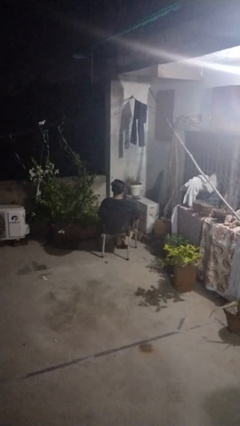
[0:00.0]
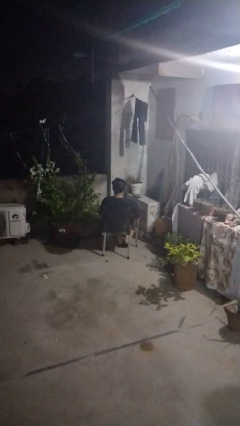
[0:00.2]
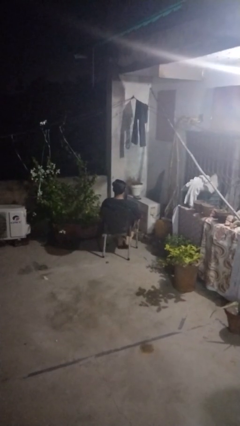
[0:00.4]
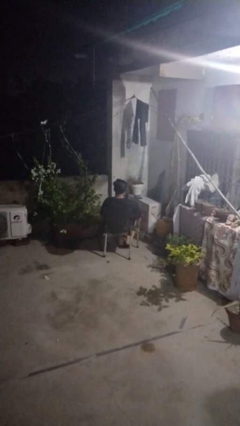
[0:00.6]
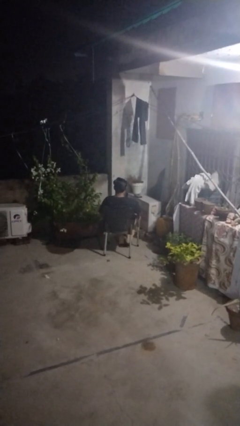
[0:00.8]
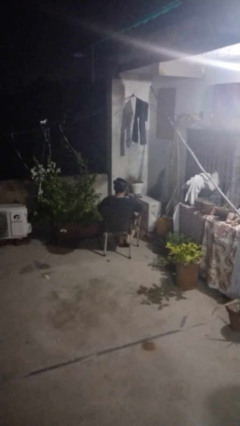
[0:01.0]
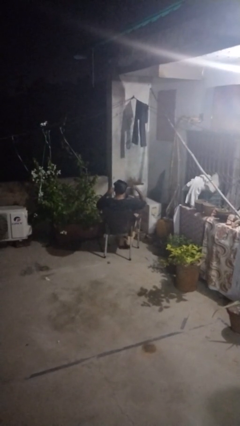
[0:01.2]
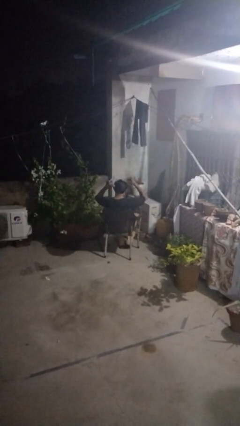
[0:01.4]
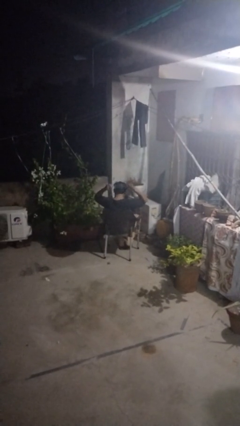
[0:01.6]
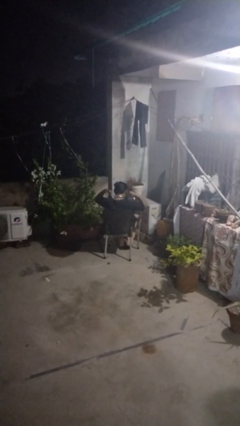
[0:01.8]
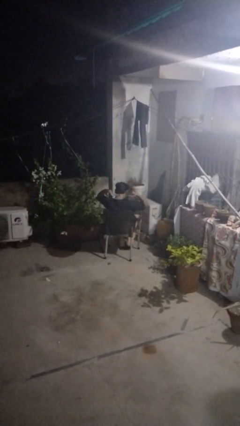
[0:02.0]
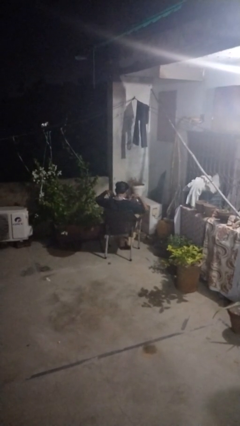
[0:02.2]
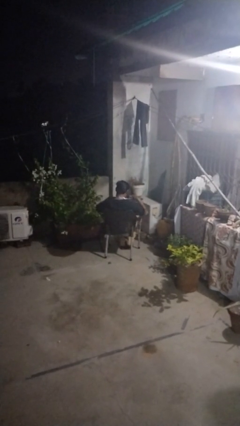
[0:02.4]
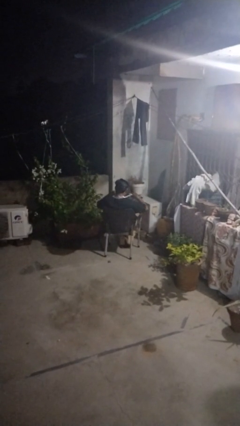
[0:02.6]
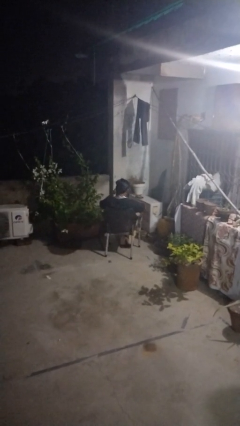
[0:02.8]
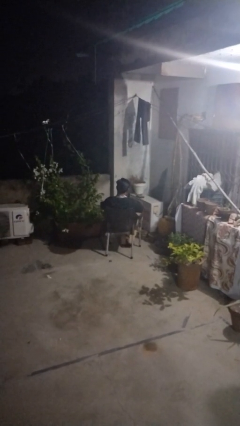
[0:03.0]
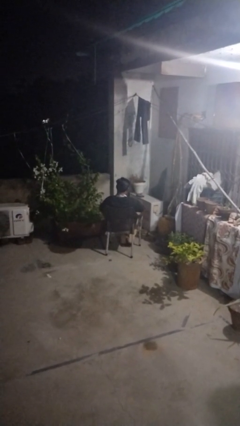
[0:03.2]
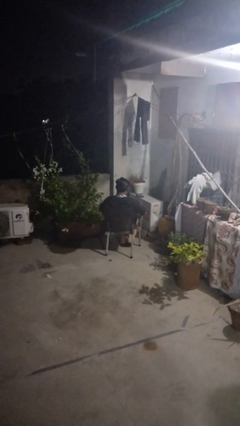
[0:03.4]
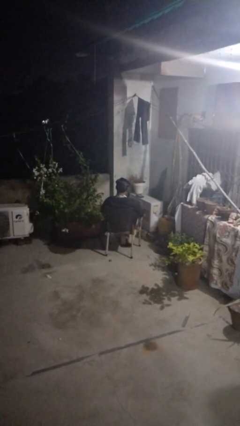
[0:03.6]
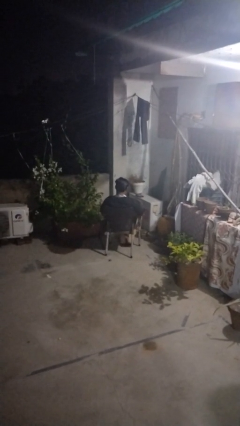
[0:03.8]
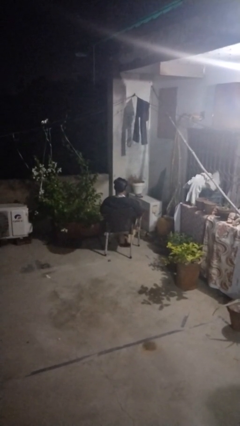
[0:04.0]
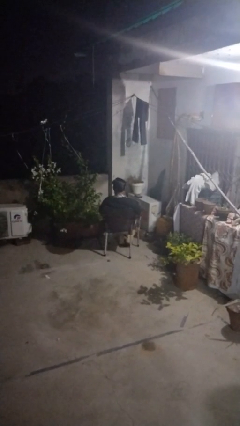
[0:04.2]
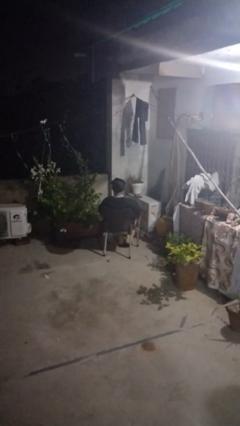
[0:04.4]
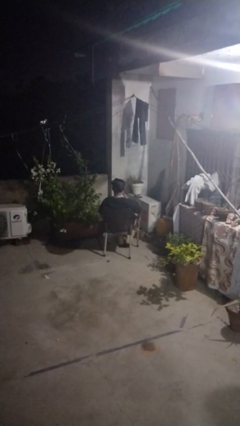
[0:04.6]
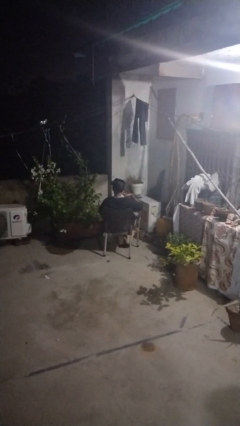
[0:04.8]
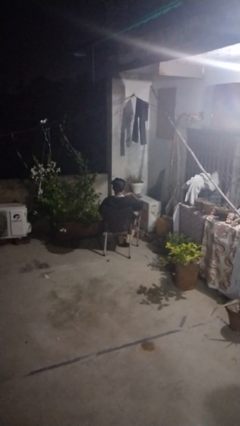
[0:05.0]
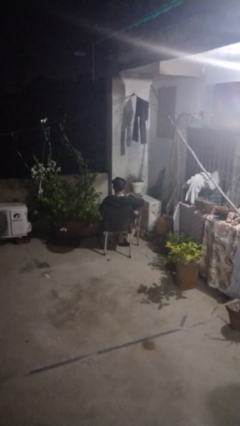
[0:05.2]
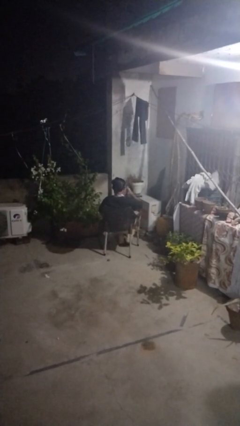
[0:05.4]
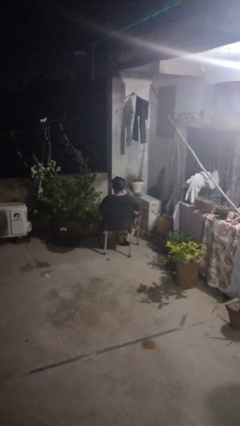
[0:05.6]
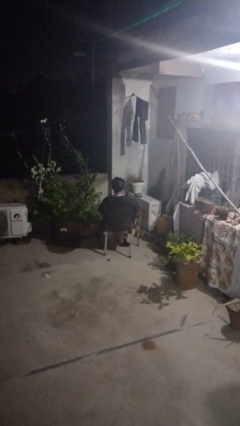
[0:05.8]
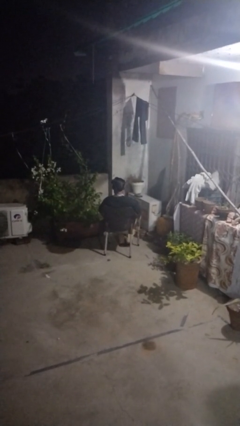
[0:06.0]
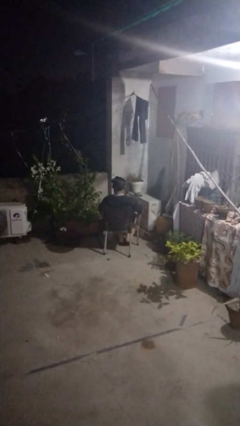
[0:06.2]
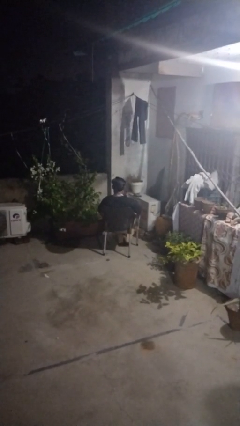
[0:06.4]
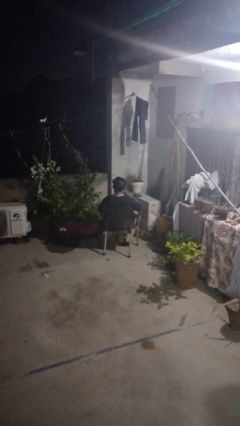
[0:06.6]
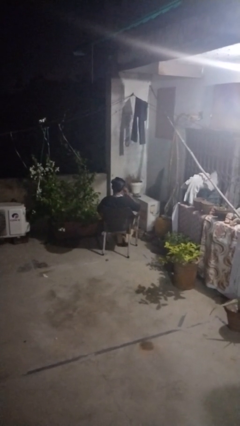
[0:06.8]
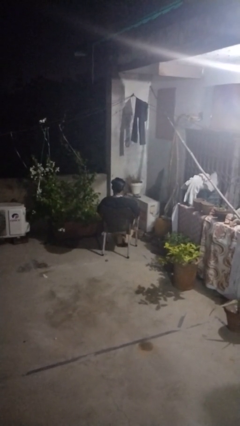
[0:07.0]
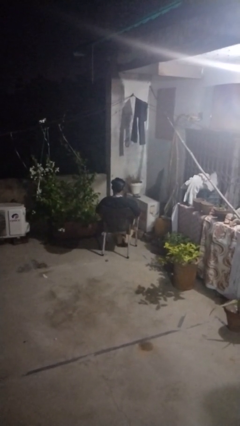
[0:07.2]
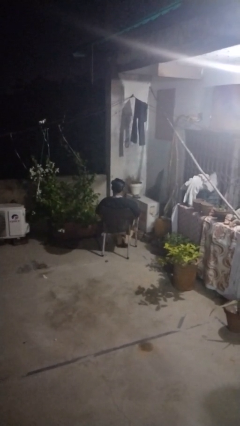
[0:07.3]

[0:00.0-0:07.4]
person puts on necktie

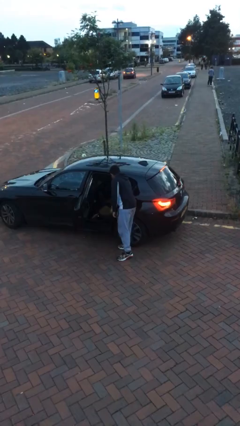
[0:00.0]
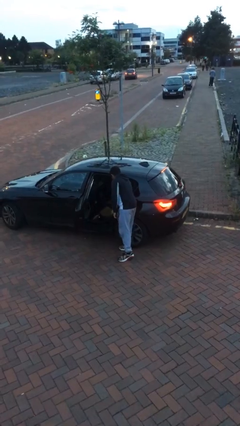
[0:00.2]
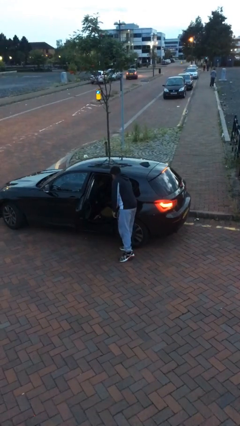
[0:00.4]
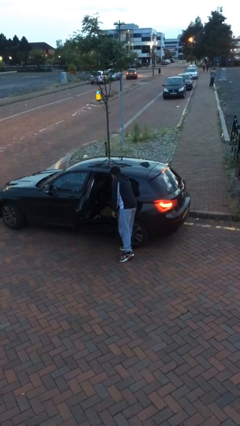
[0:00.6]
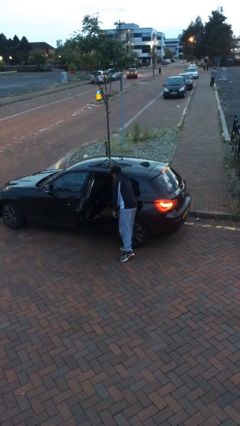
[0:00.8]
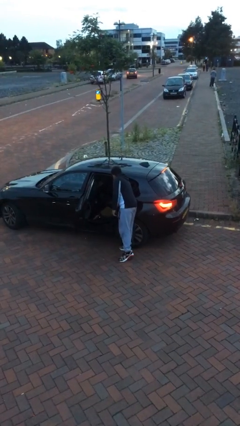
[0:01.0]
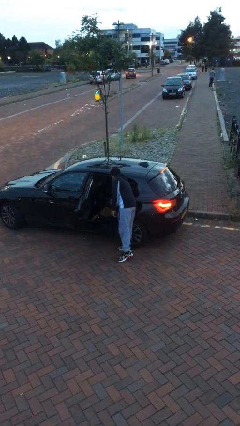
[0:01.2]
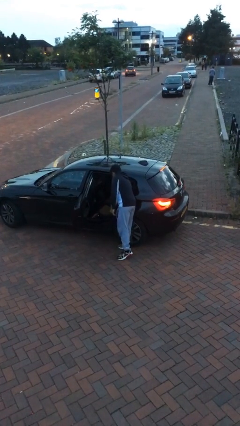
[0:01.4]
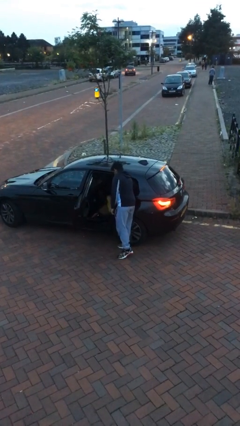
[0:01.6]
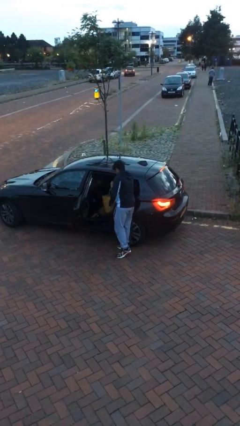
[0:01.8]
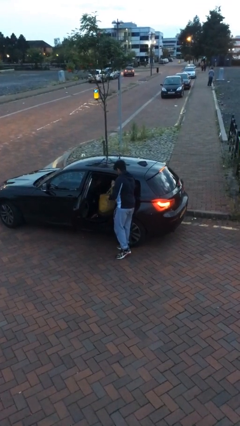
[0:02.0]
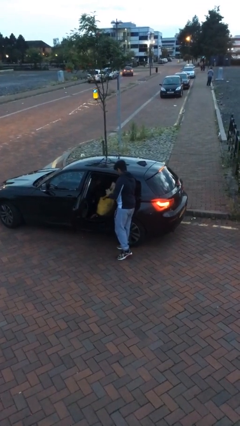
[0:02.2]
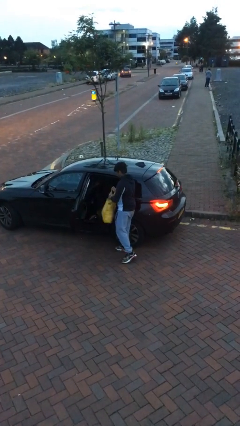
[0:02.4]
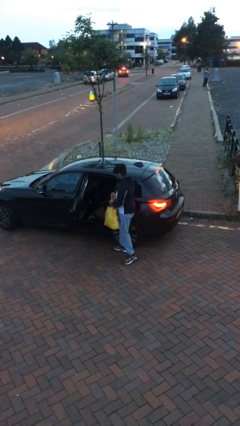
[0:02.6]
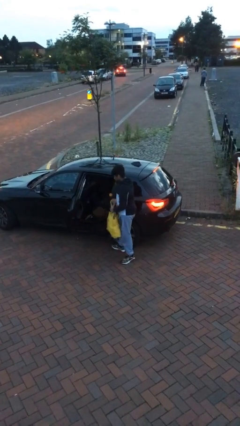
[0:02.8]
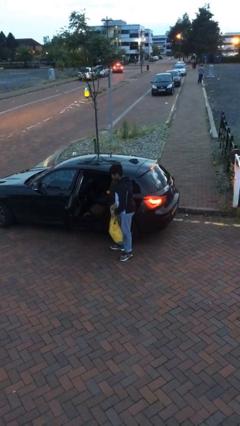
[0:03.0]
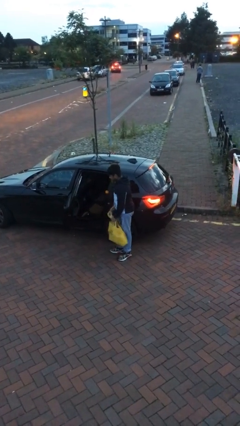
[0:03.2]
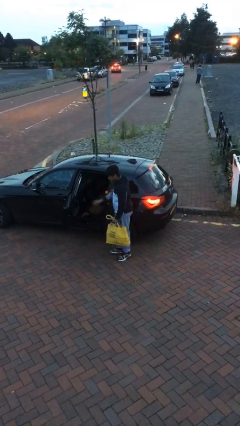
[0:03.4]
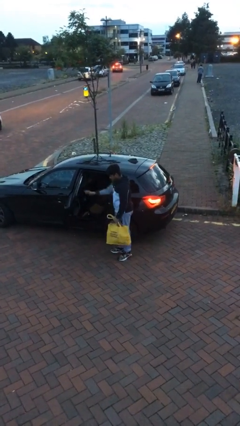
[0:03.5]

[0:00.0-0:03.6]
person unloads car

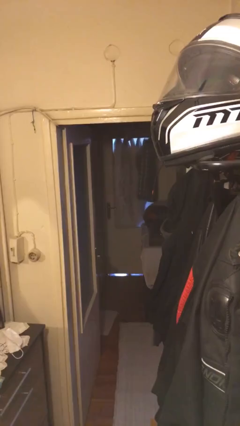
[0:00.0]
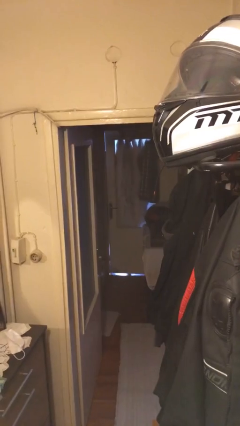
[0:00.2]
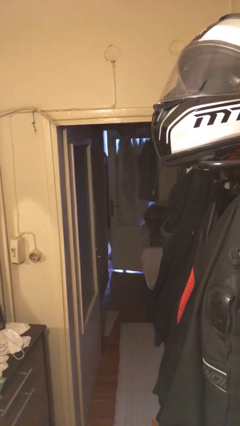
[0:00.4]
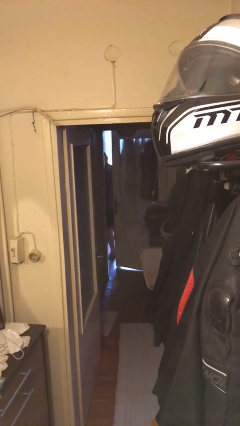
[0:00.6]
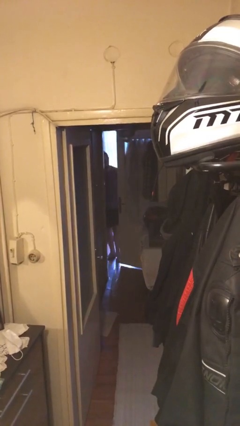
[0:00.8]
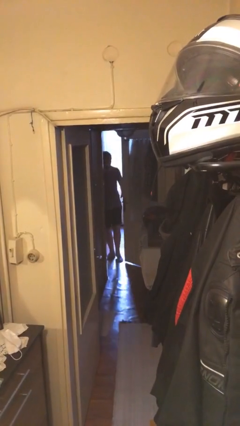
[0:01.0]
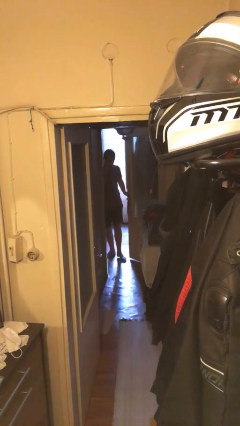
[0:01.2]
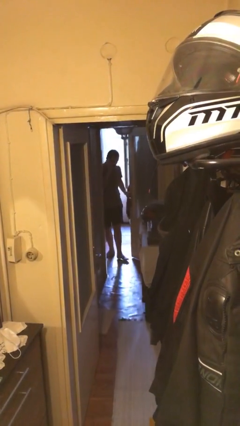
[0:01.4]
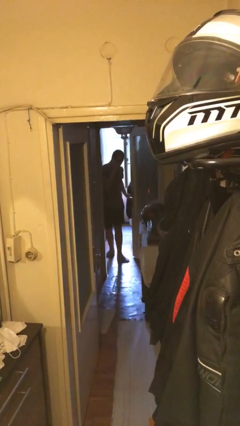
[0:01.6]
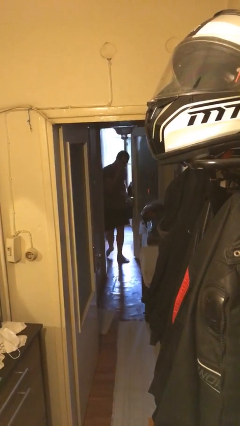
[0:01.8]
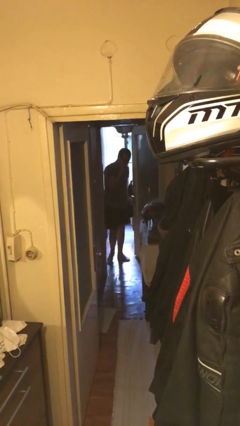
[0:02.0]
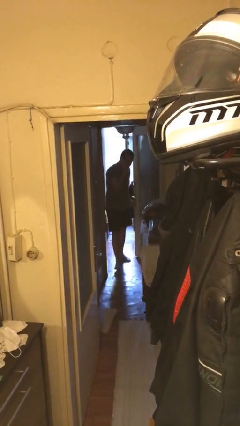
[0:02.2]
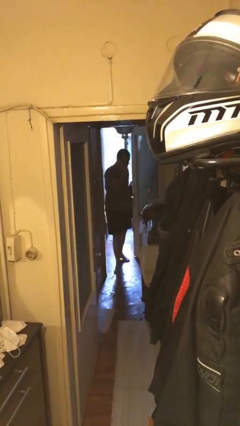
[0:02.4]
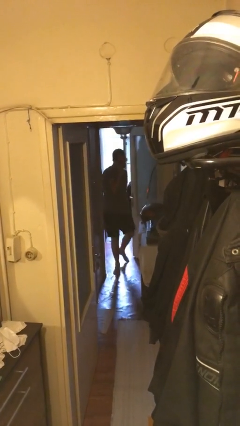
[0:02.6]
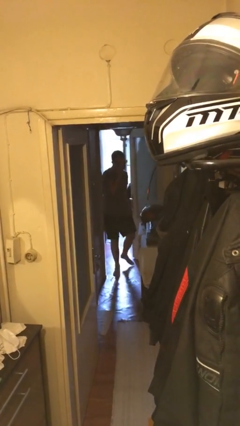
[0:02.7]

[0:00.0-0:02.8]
person opens facility door

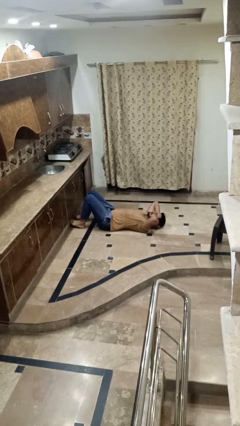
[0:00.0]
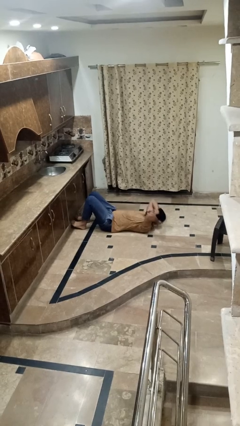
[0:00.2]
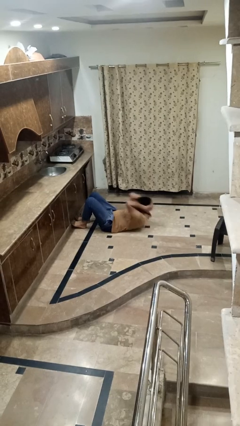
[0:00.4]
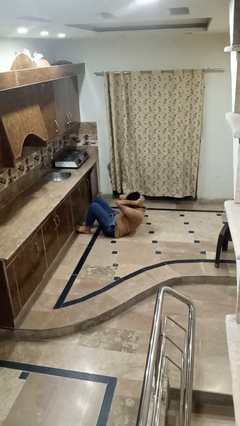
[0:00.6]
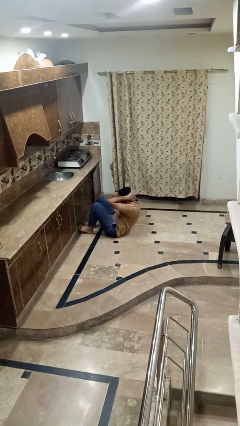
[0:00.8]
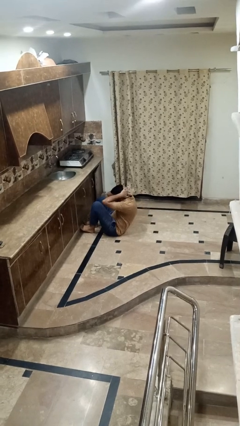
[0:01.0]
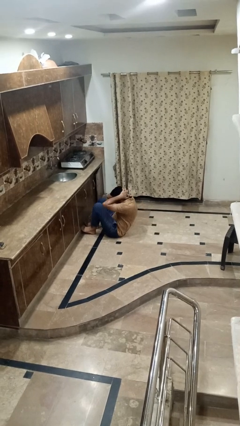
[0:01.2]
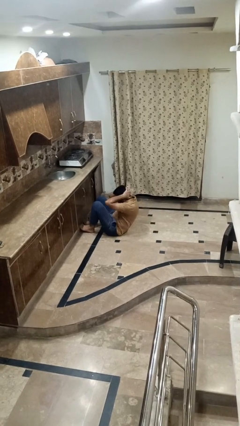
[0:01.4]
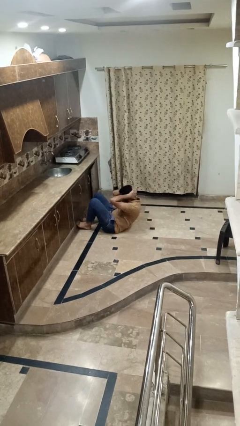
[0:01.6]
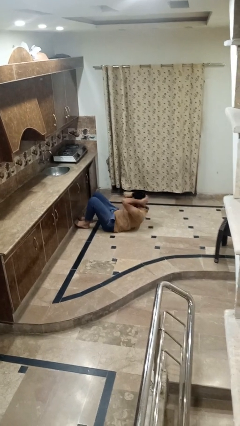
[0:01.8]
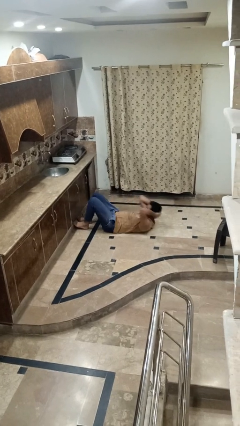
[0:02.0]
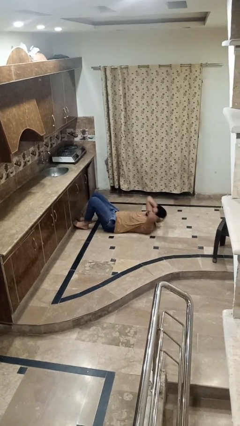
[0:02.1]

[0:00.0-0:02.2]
person exercises with situp

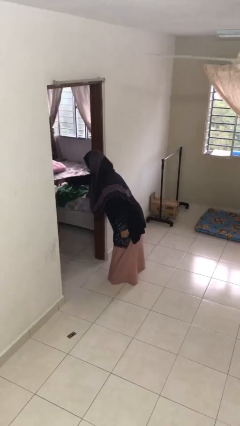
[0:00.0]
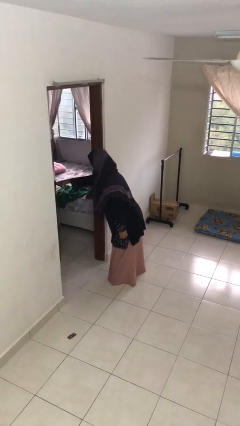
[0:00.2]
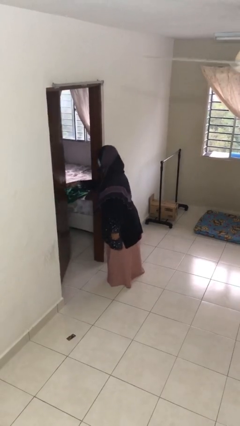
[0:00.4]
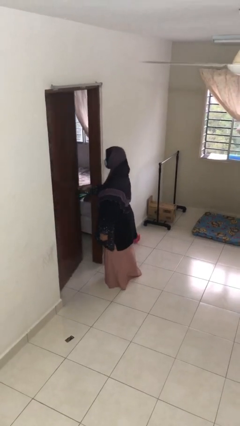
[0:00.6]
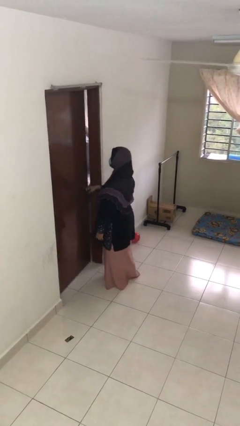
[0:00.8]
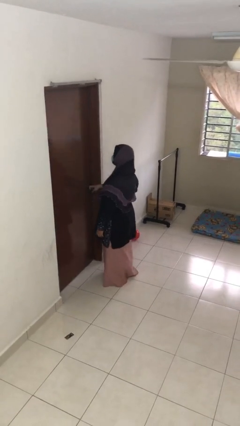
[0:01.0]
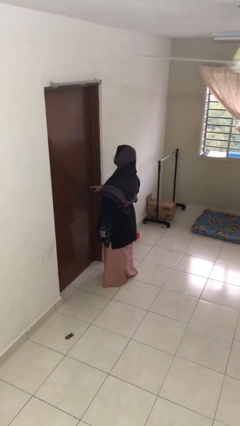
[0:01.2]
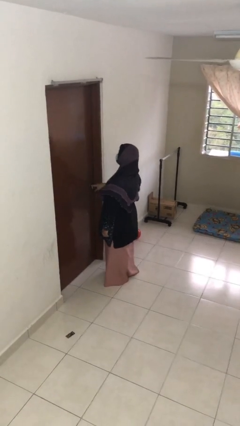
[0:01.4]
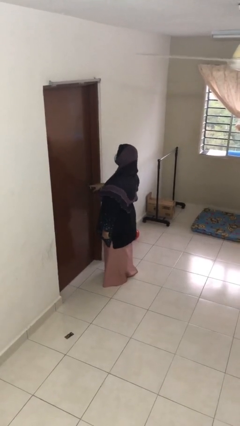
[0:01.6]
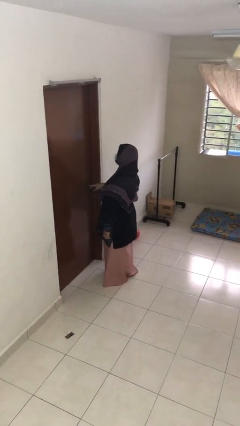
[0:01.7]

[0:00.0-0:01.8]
person closes facility door
